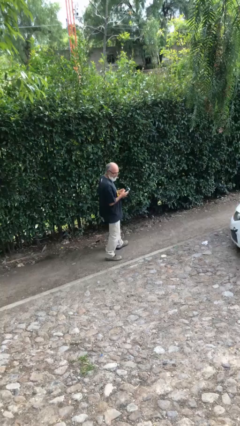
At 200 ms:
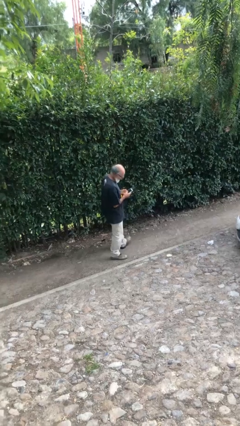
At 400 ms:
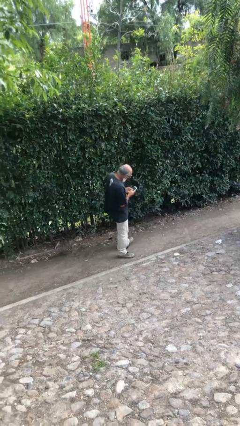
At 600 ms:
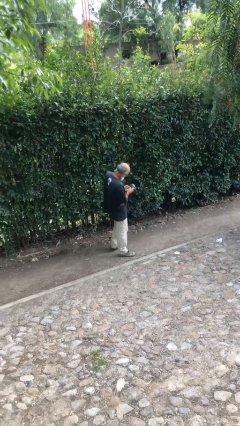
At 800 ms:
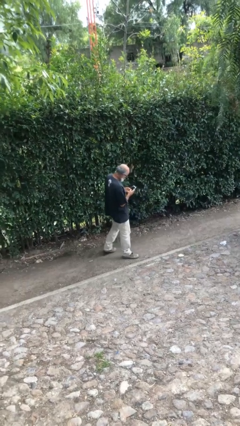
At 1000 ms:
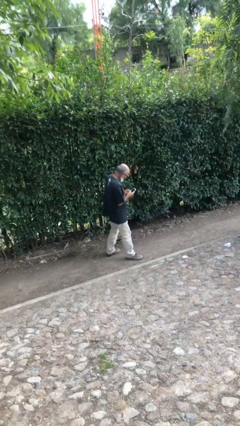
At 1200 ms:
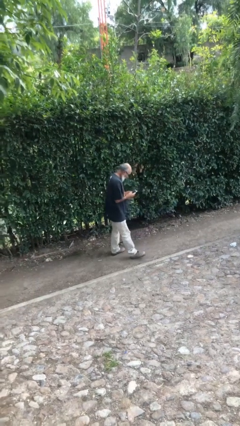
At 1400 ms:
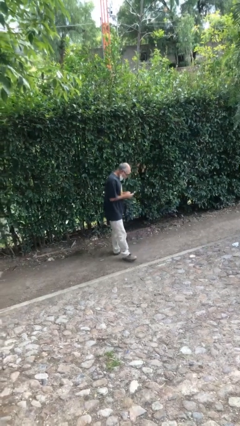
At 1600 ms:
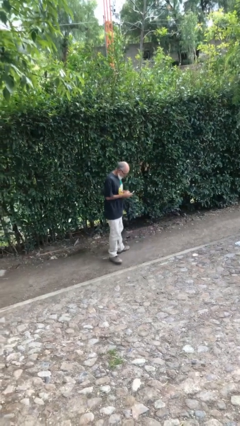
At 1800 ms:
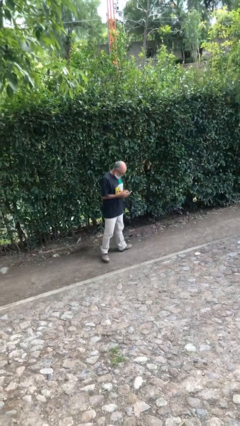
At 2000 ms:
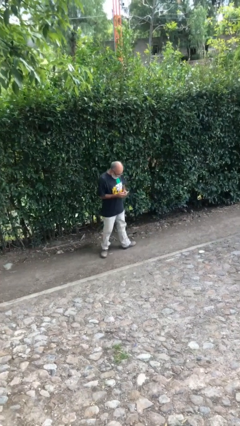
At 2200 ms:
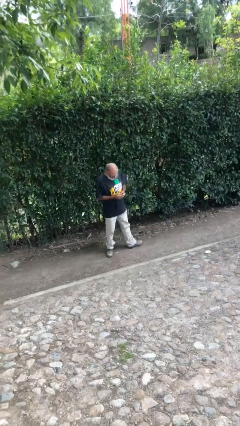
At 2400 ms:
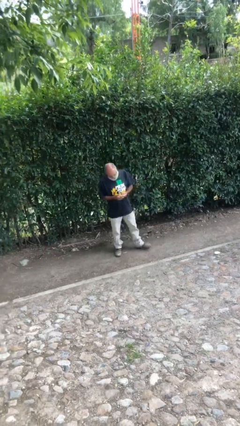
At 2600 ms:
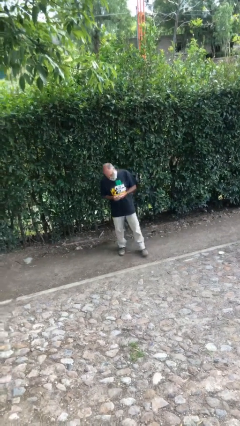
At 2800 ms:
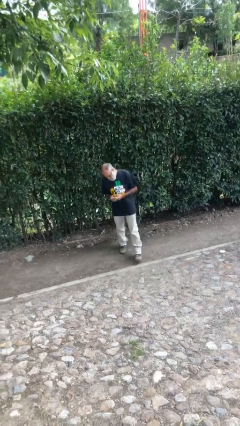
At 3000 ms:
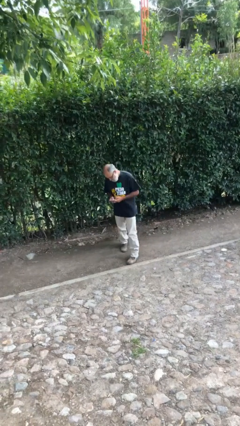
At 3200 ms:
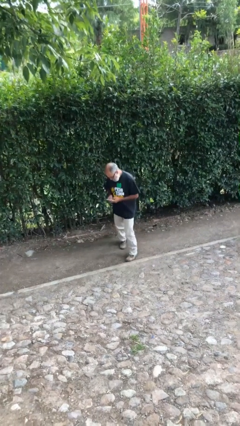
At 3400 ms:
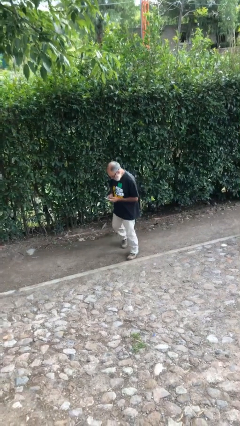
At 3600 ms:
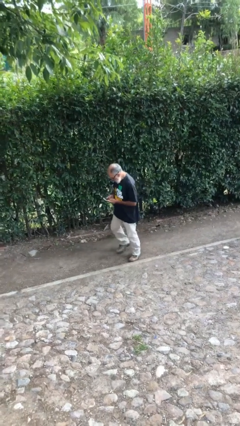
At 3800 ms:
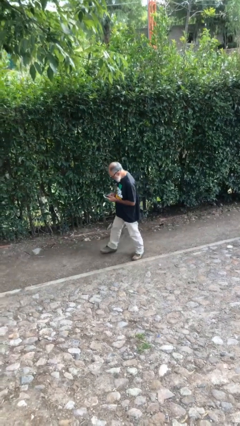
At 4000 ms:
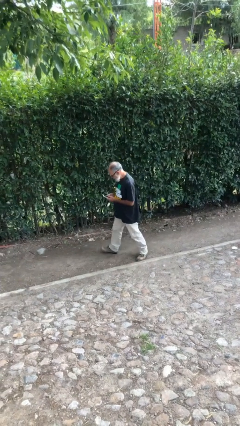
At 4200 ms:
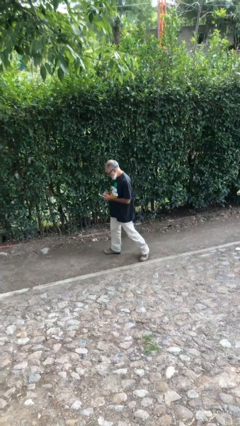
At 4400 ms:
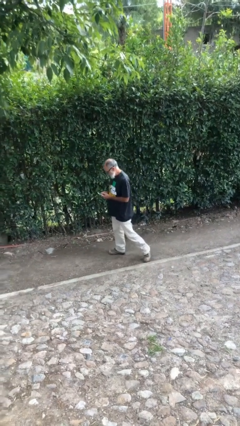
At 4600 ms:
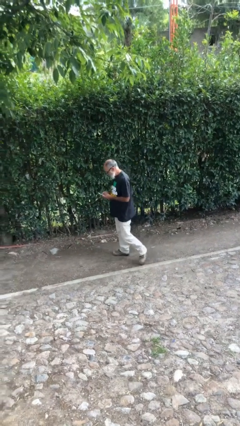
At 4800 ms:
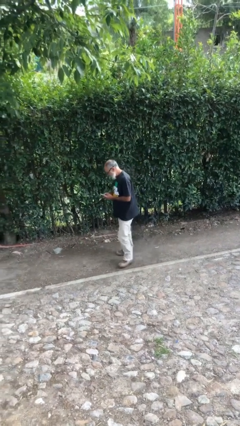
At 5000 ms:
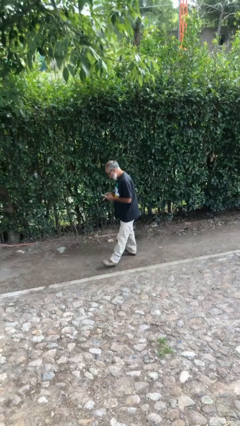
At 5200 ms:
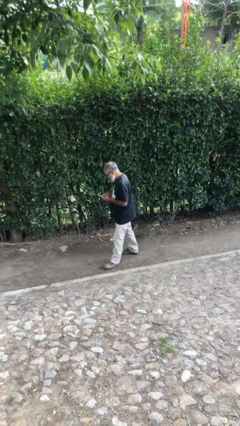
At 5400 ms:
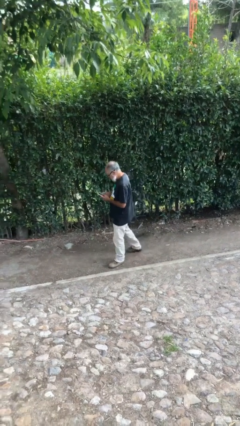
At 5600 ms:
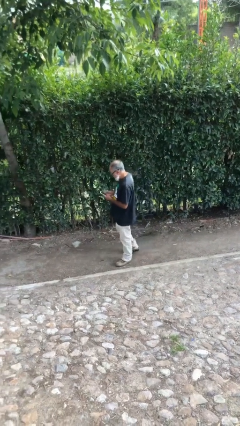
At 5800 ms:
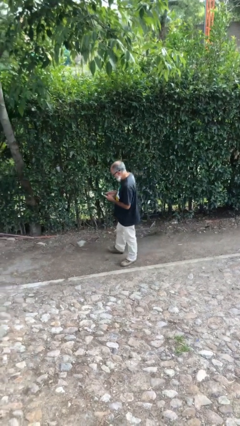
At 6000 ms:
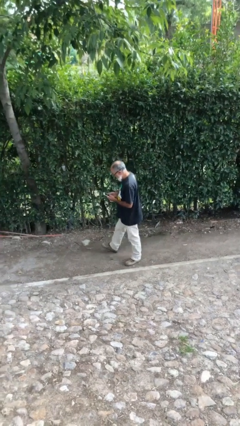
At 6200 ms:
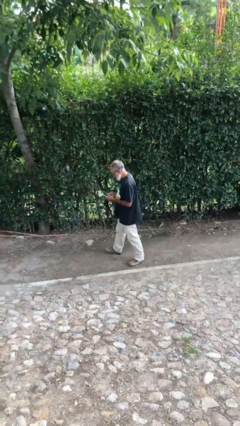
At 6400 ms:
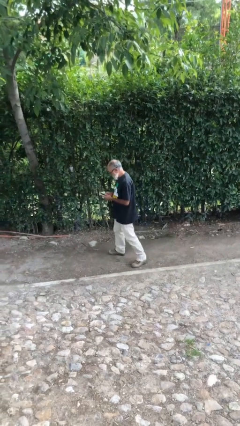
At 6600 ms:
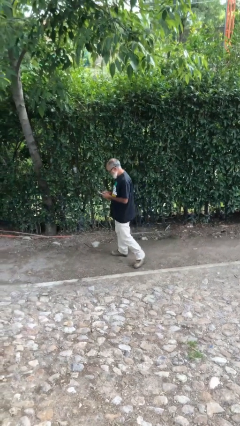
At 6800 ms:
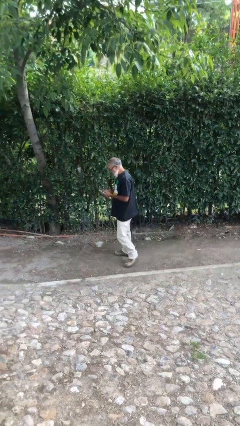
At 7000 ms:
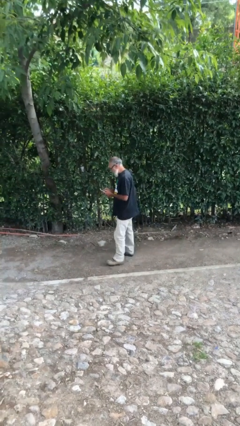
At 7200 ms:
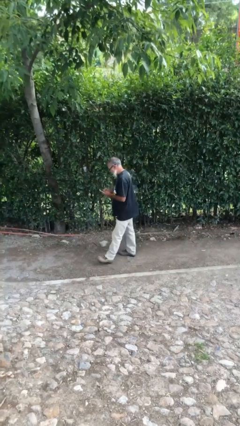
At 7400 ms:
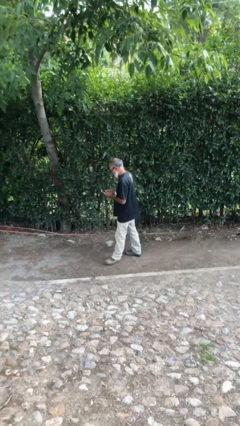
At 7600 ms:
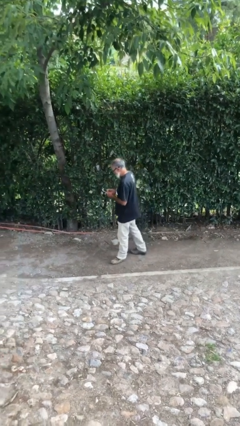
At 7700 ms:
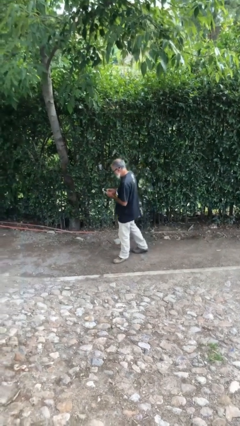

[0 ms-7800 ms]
person texts on phone

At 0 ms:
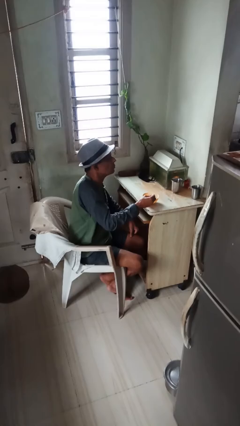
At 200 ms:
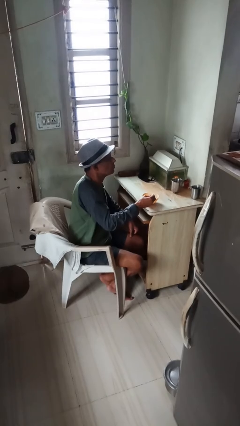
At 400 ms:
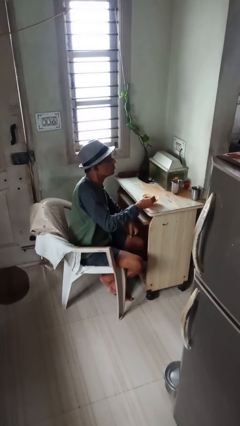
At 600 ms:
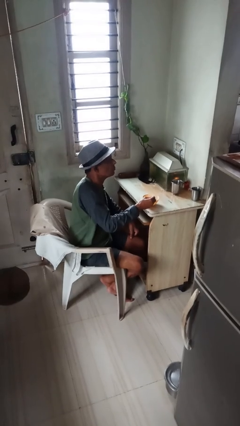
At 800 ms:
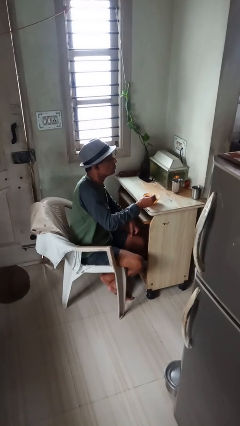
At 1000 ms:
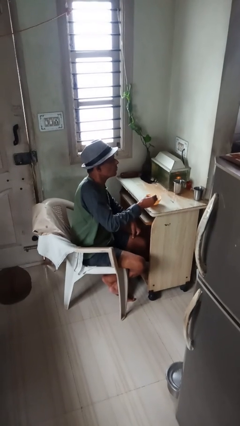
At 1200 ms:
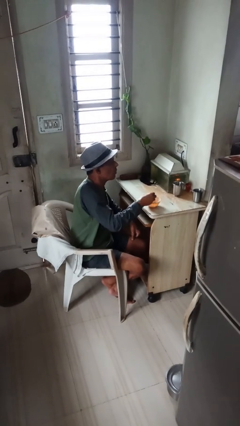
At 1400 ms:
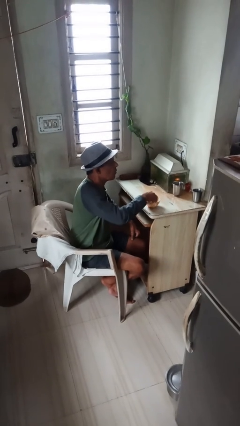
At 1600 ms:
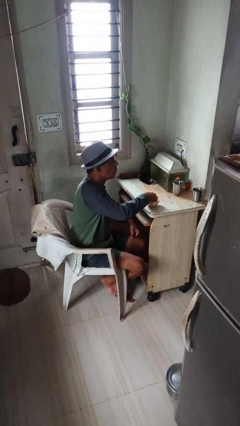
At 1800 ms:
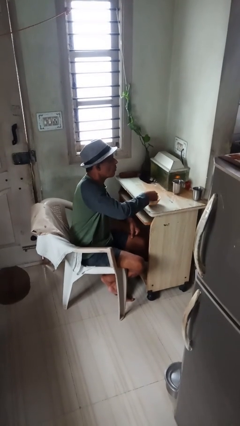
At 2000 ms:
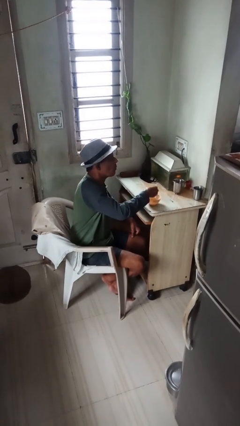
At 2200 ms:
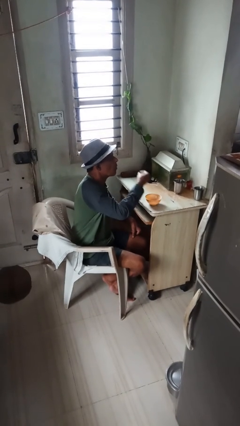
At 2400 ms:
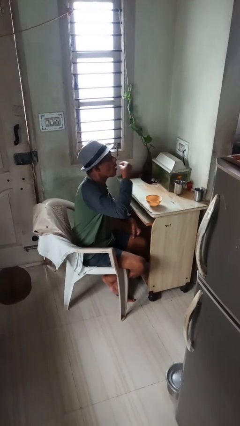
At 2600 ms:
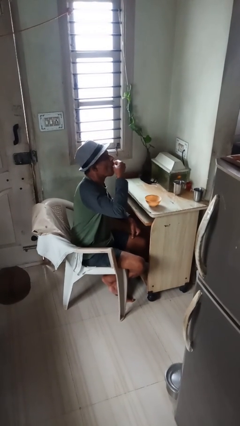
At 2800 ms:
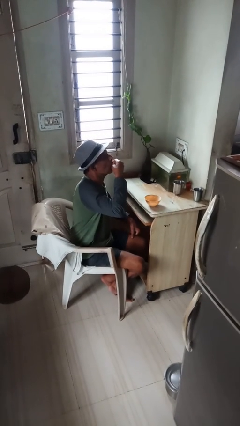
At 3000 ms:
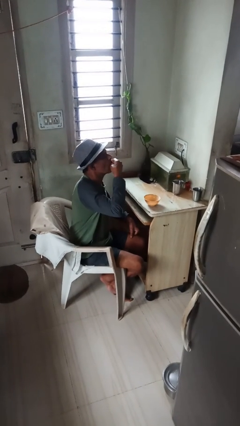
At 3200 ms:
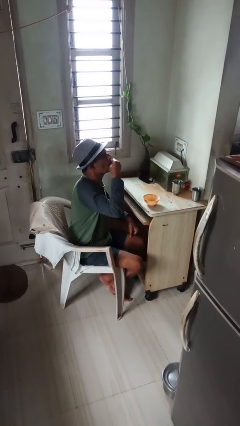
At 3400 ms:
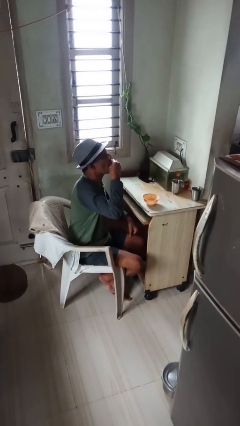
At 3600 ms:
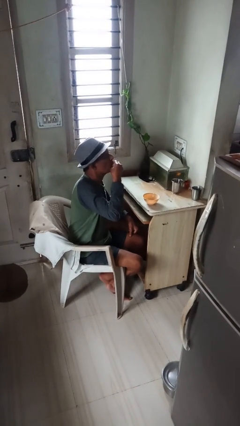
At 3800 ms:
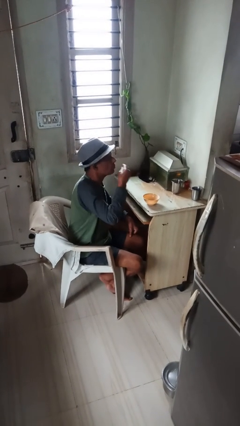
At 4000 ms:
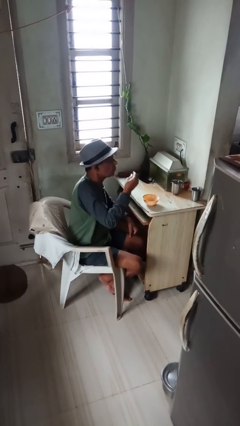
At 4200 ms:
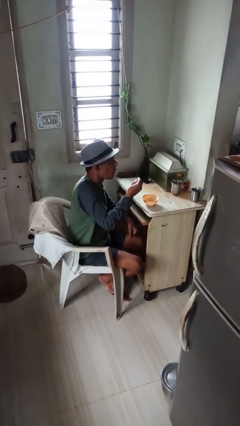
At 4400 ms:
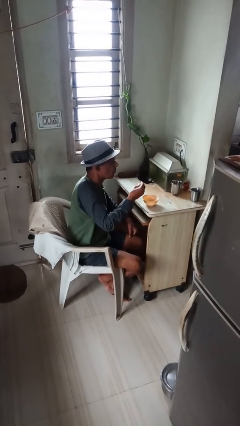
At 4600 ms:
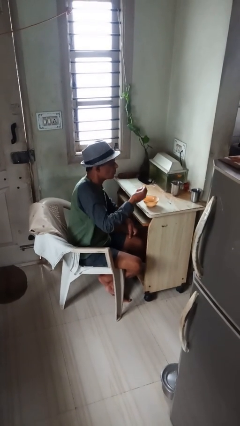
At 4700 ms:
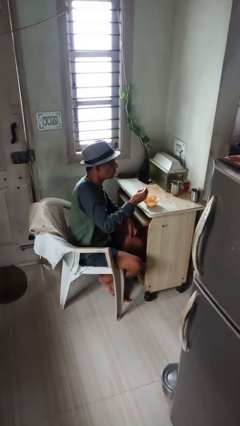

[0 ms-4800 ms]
person eats with hands

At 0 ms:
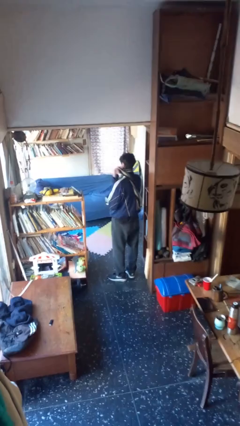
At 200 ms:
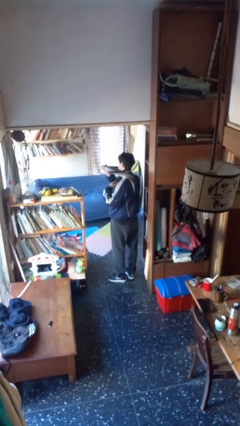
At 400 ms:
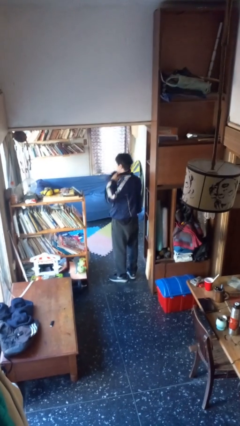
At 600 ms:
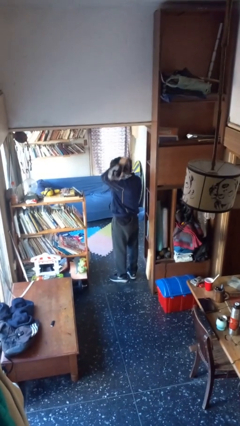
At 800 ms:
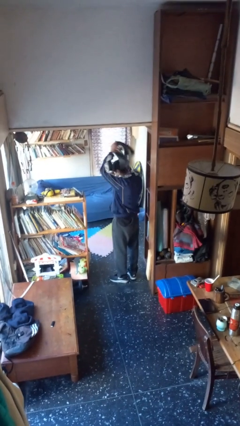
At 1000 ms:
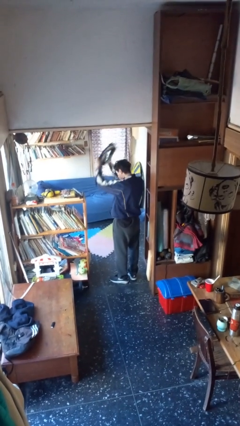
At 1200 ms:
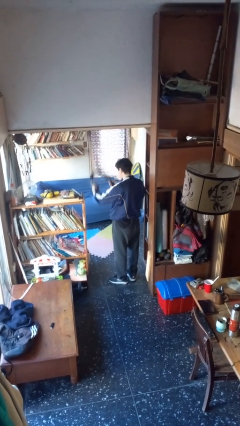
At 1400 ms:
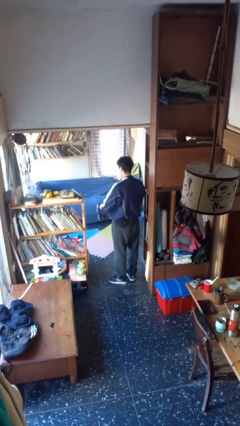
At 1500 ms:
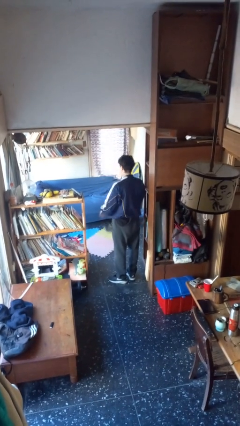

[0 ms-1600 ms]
person takes off scarf

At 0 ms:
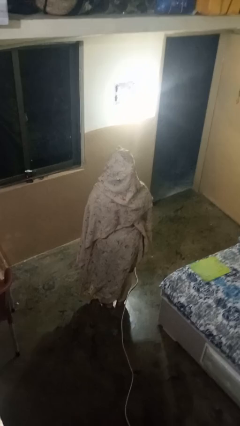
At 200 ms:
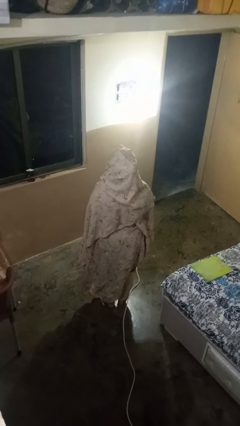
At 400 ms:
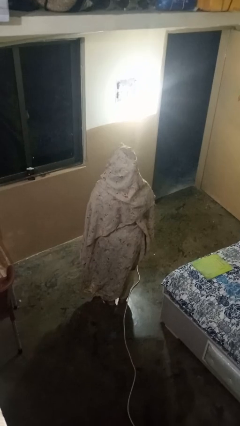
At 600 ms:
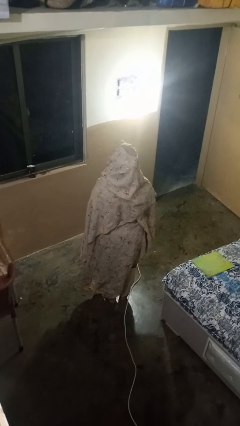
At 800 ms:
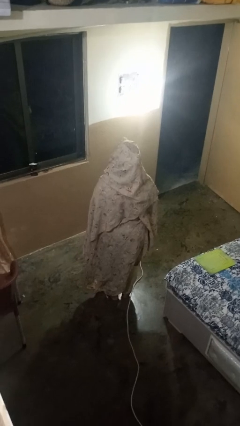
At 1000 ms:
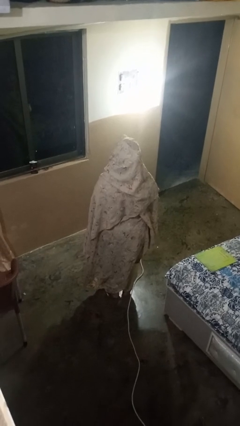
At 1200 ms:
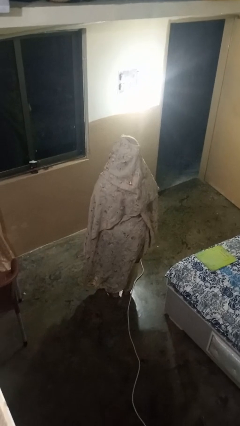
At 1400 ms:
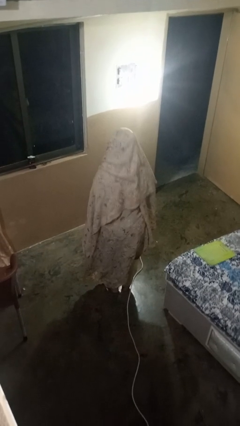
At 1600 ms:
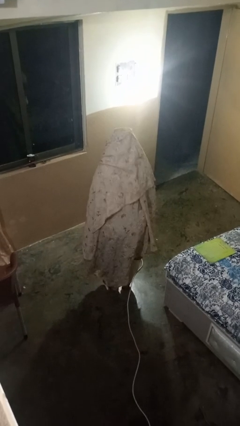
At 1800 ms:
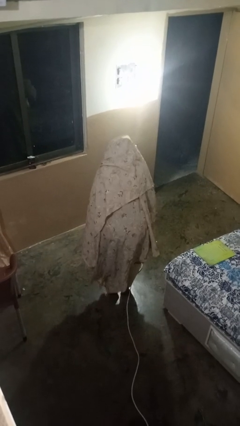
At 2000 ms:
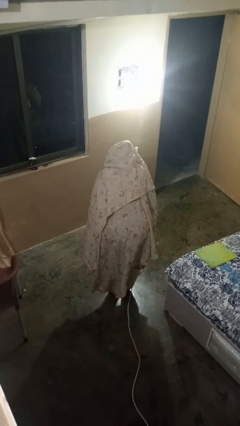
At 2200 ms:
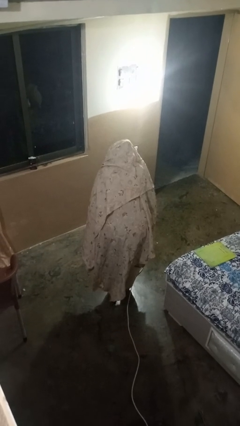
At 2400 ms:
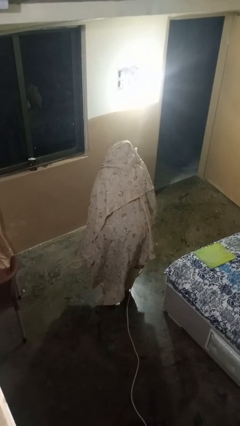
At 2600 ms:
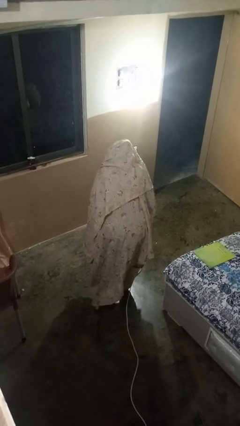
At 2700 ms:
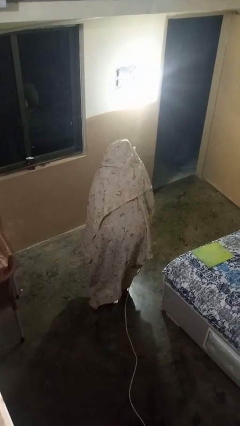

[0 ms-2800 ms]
person bows
